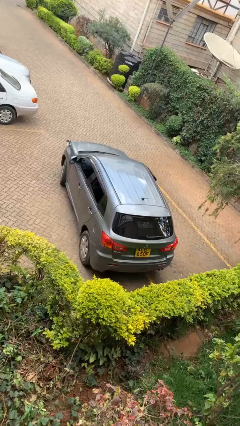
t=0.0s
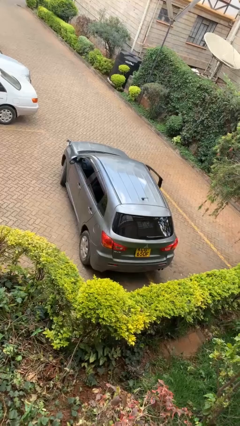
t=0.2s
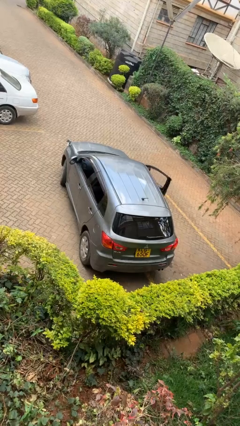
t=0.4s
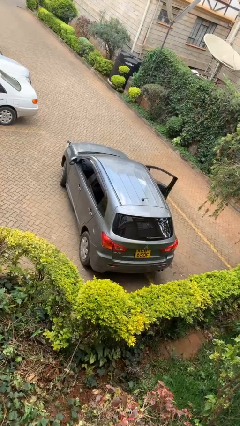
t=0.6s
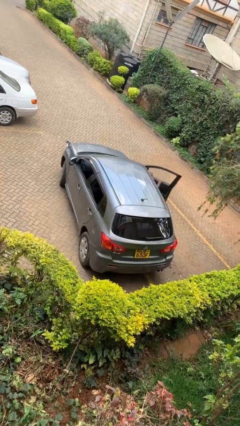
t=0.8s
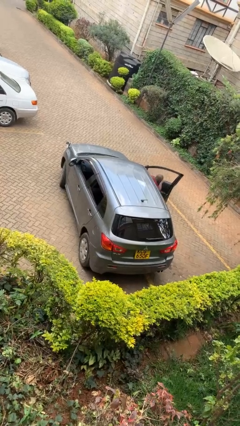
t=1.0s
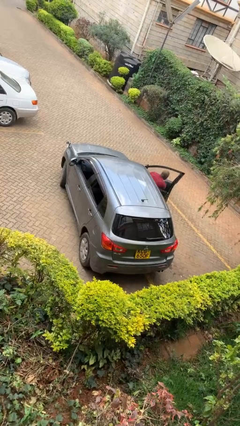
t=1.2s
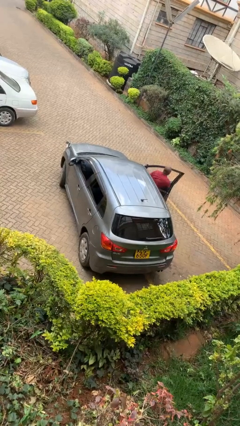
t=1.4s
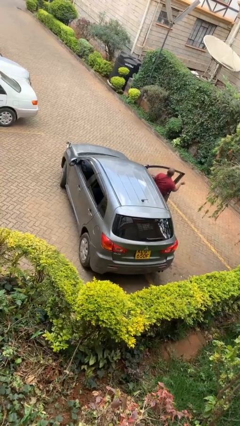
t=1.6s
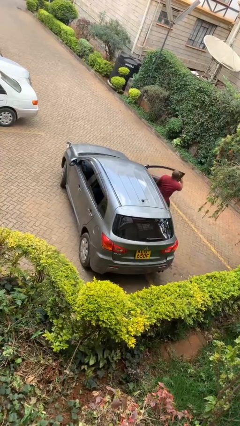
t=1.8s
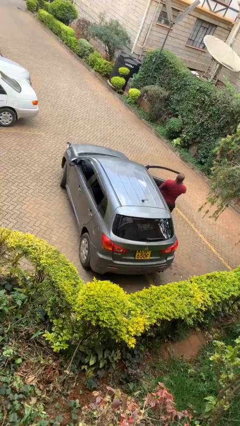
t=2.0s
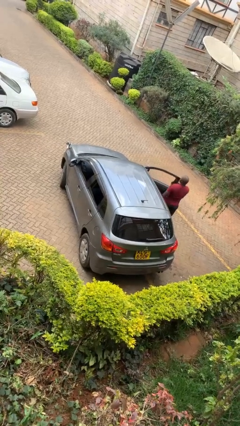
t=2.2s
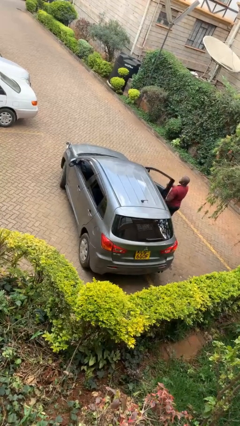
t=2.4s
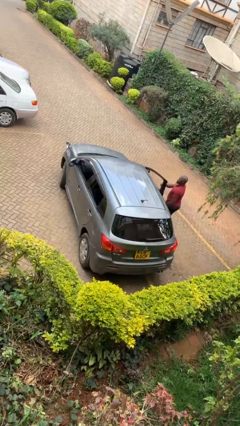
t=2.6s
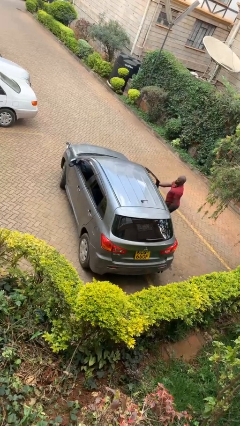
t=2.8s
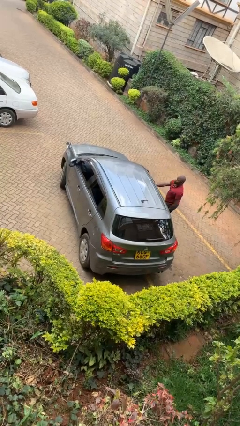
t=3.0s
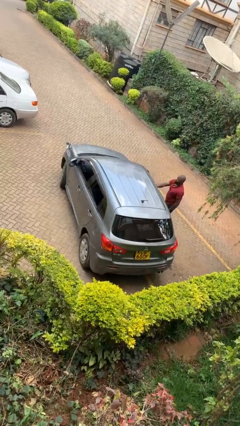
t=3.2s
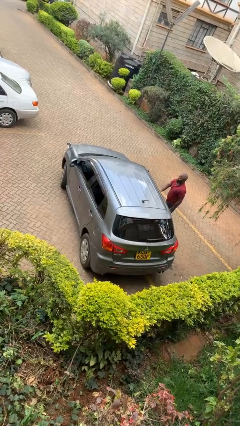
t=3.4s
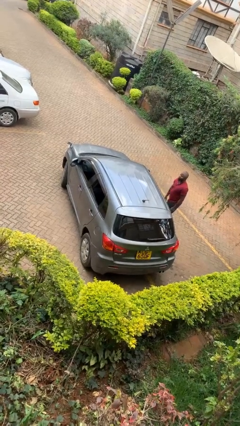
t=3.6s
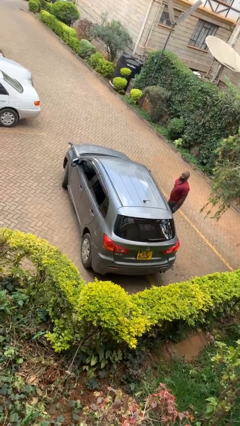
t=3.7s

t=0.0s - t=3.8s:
car drops off person

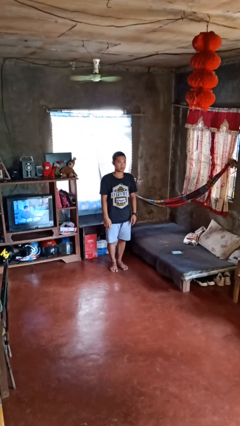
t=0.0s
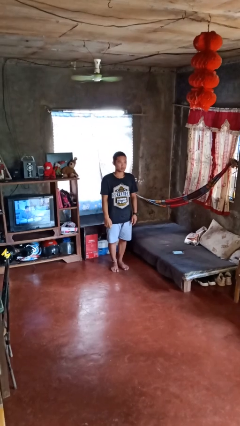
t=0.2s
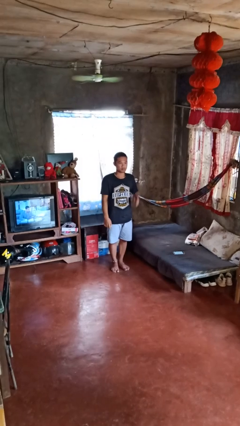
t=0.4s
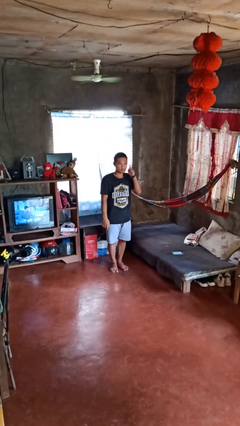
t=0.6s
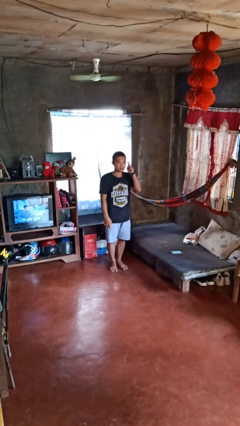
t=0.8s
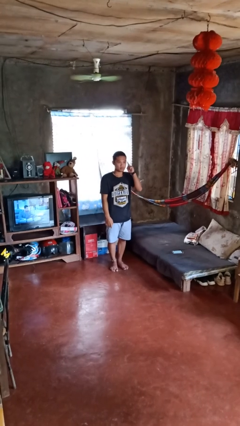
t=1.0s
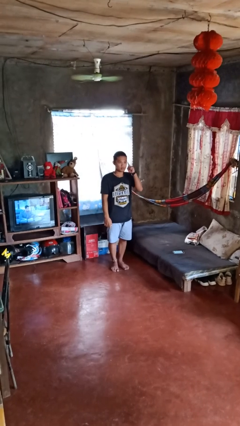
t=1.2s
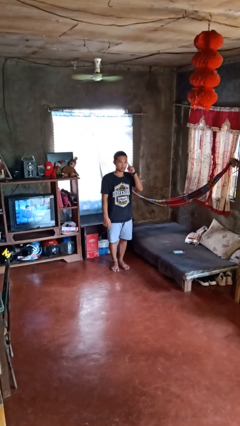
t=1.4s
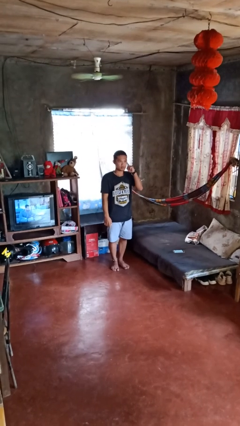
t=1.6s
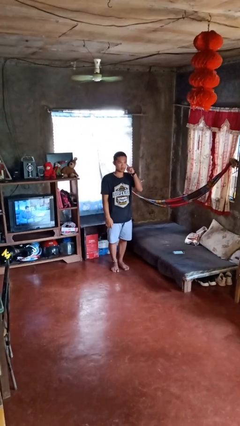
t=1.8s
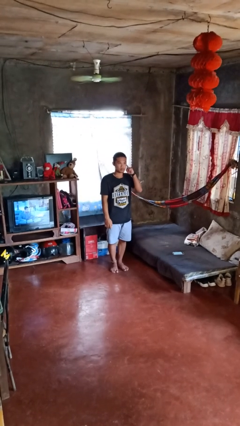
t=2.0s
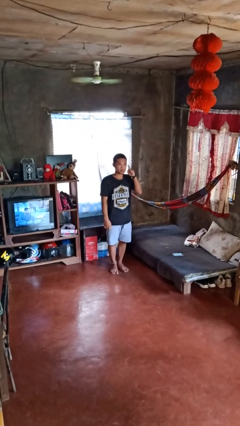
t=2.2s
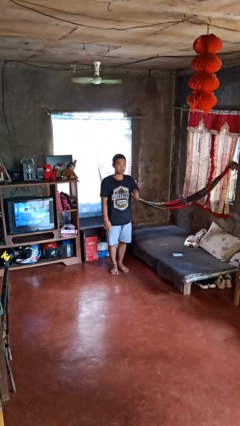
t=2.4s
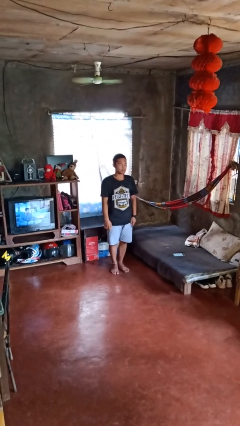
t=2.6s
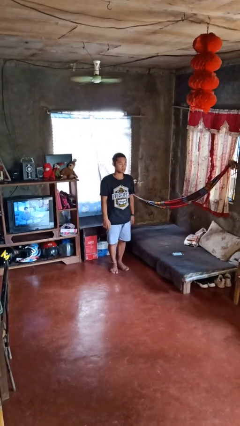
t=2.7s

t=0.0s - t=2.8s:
person gestures listen closely

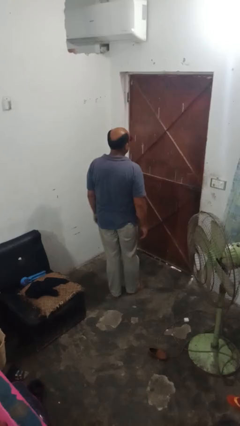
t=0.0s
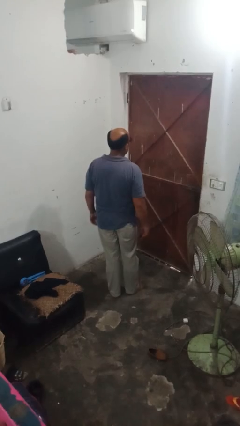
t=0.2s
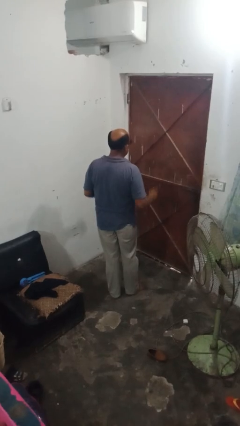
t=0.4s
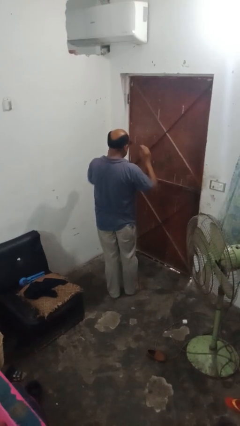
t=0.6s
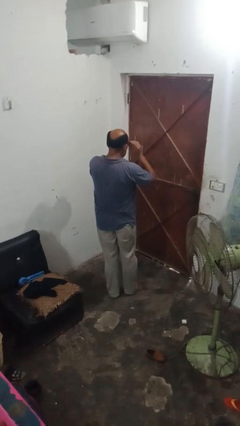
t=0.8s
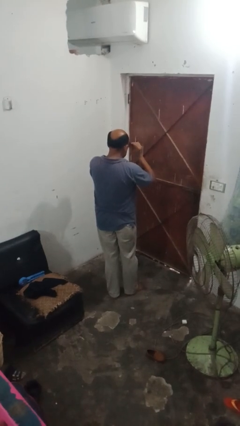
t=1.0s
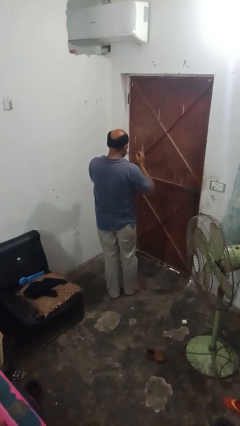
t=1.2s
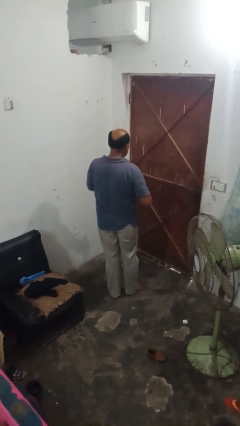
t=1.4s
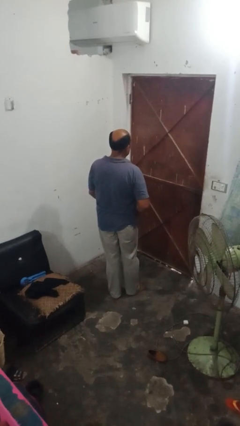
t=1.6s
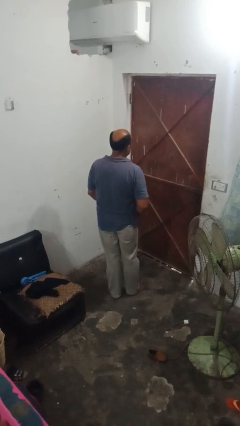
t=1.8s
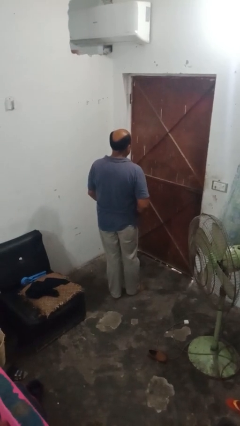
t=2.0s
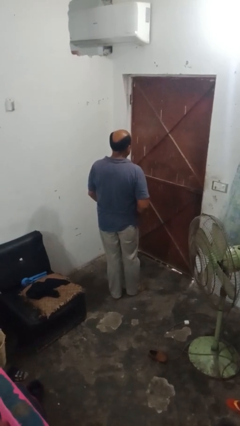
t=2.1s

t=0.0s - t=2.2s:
person takes off sunglasses

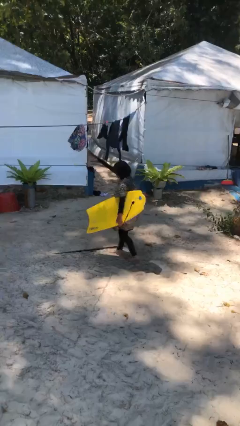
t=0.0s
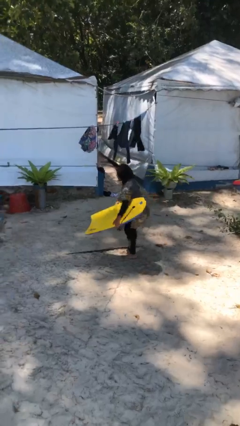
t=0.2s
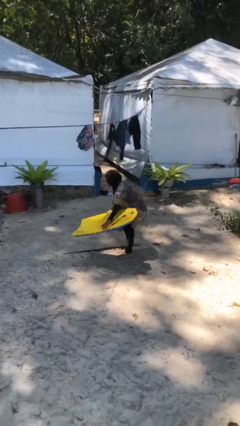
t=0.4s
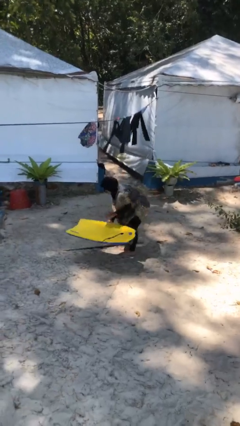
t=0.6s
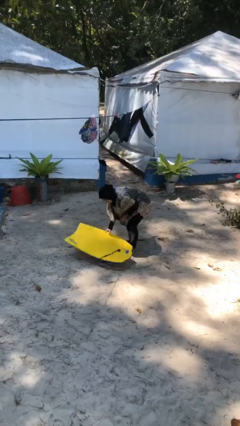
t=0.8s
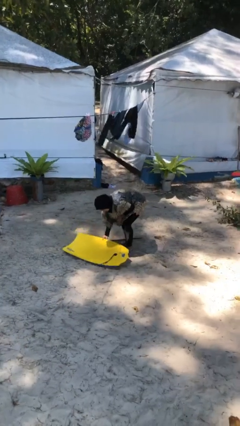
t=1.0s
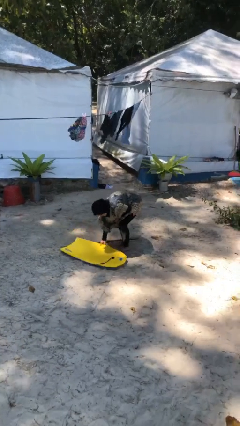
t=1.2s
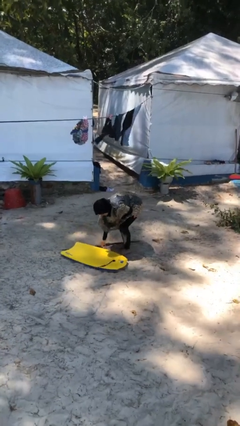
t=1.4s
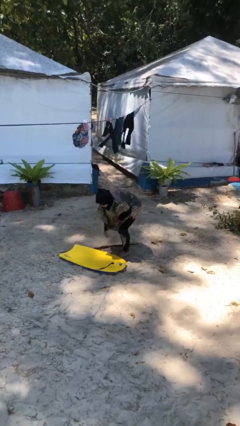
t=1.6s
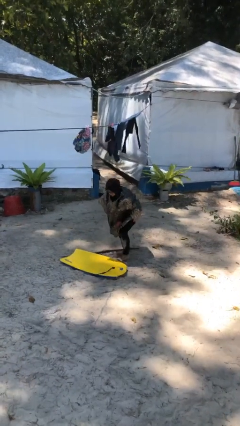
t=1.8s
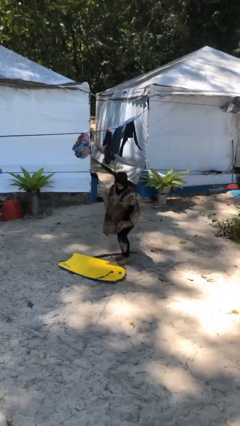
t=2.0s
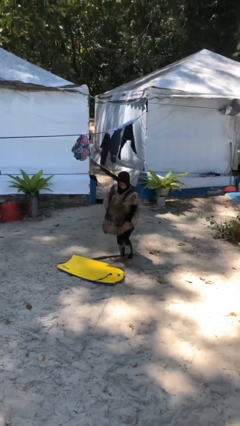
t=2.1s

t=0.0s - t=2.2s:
person puts down object on floor

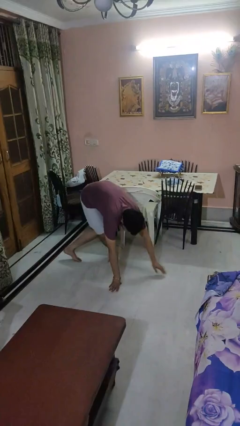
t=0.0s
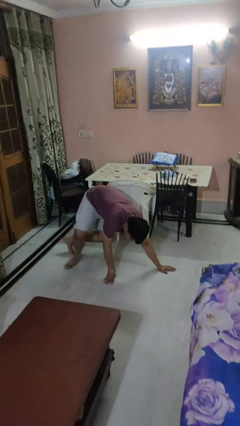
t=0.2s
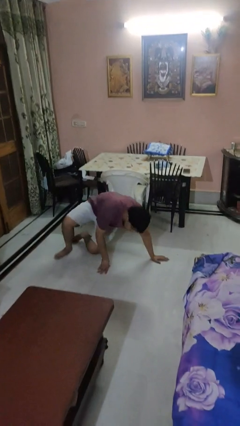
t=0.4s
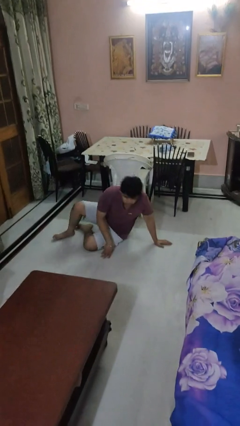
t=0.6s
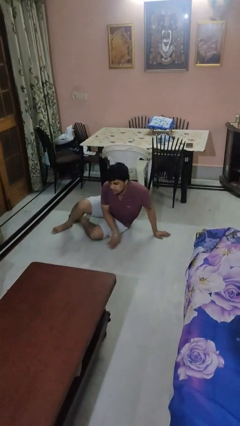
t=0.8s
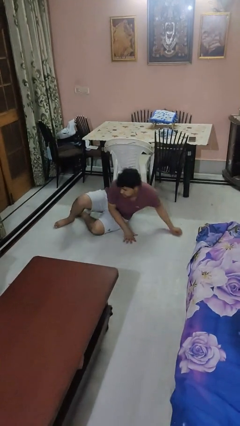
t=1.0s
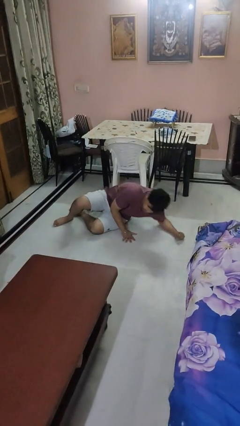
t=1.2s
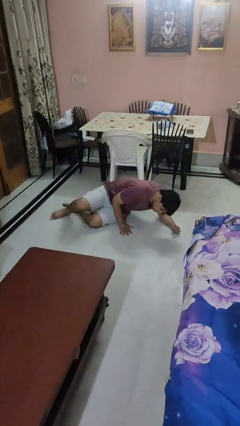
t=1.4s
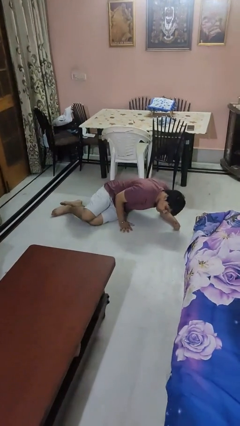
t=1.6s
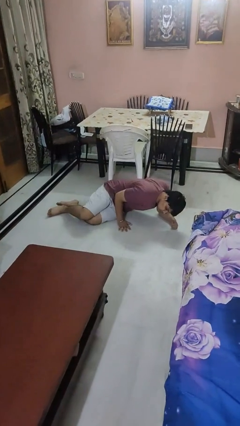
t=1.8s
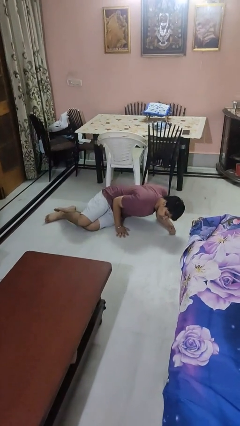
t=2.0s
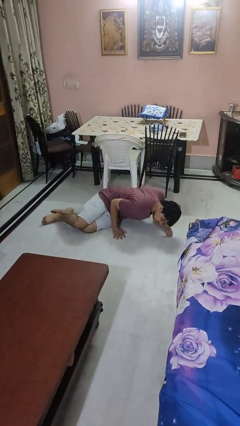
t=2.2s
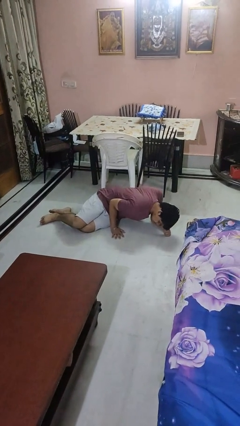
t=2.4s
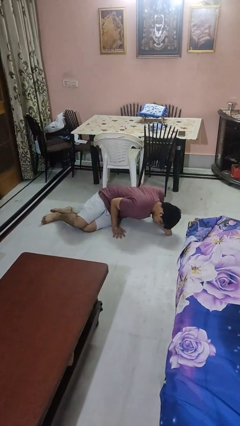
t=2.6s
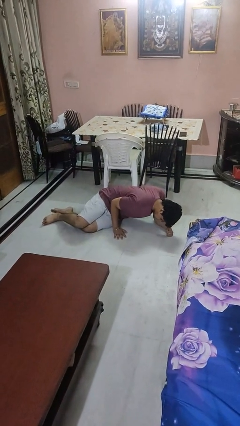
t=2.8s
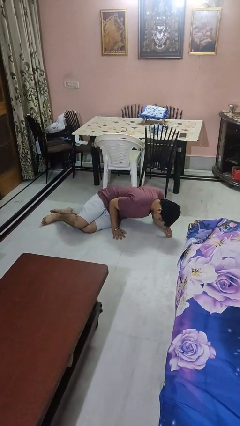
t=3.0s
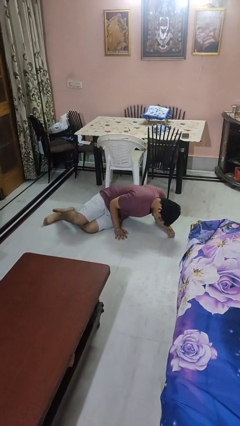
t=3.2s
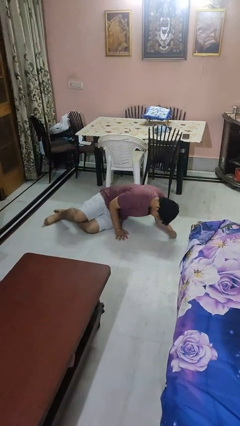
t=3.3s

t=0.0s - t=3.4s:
person lies down on floor

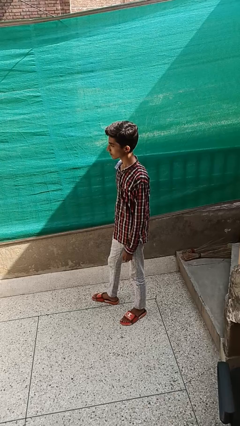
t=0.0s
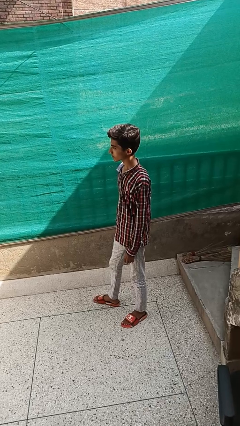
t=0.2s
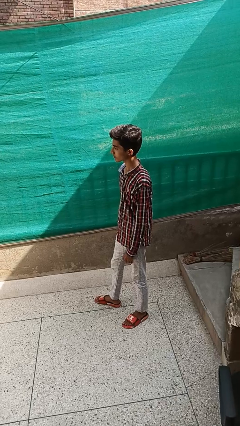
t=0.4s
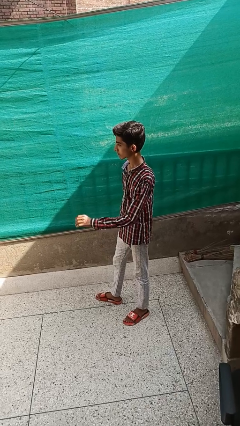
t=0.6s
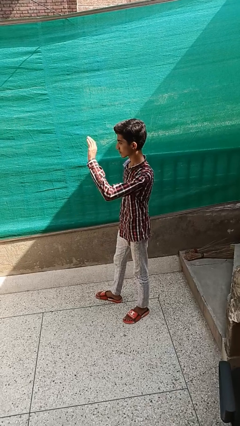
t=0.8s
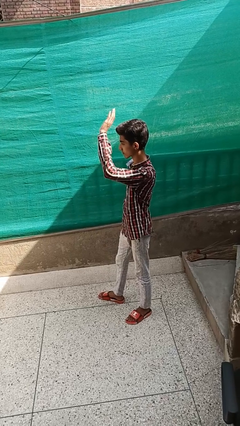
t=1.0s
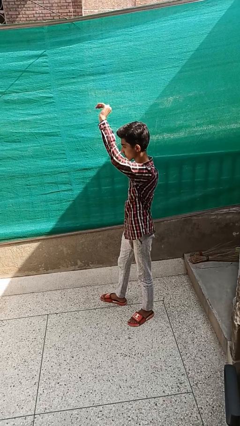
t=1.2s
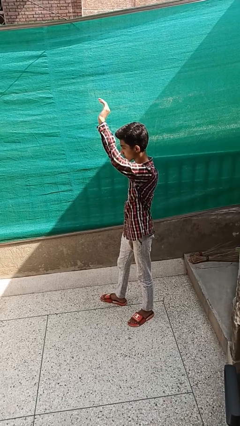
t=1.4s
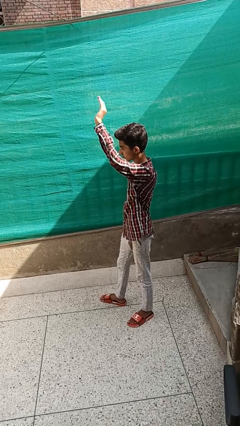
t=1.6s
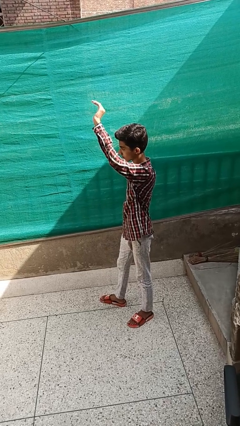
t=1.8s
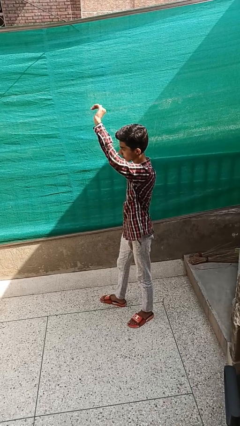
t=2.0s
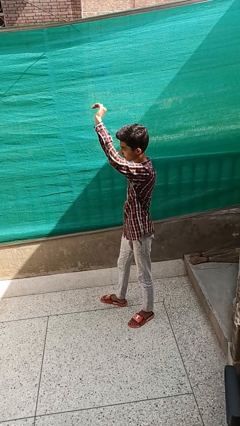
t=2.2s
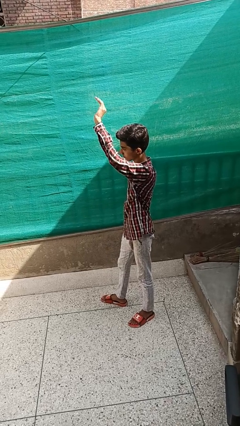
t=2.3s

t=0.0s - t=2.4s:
person gestures come here

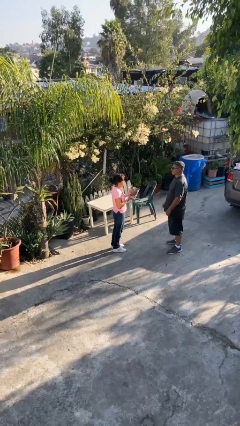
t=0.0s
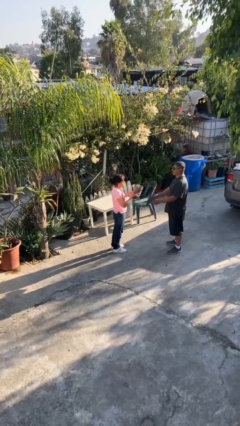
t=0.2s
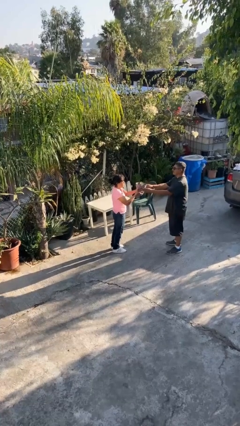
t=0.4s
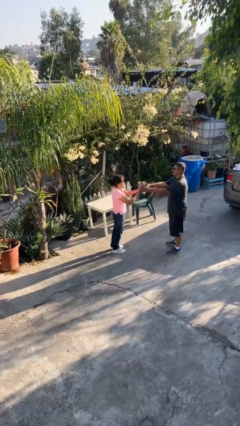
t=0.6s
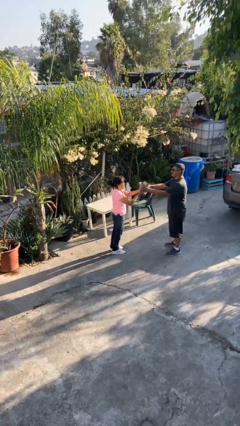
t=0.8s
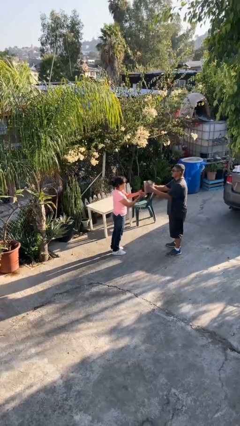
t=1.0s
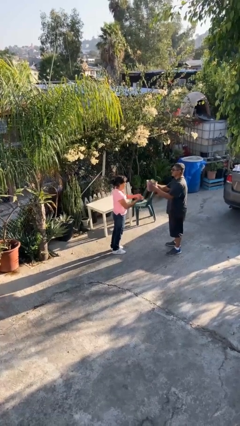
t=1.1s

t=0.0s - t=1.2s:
person transfers object to person
